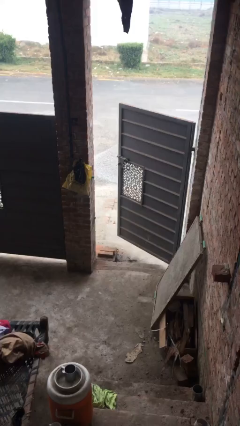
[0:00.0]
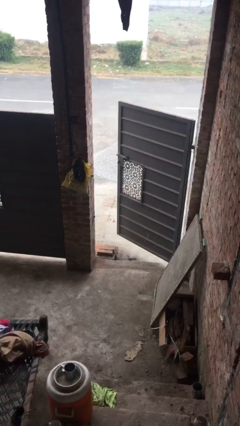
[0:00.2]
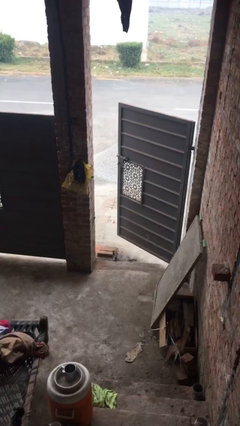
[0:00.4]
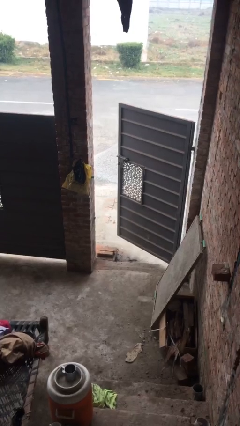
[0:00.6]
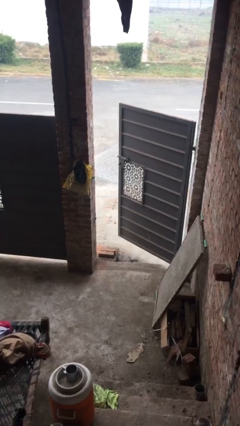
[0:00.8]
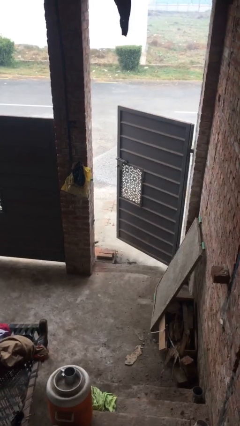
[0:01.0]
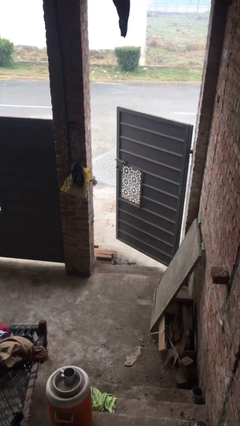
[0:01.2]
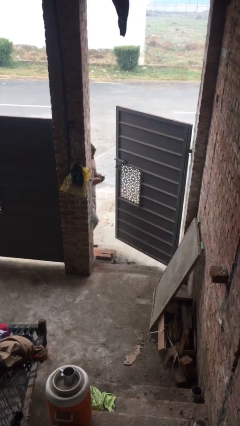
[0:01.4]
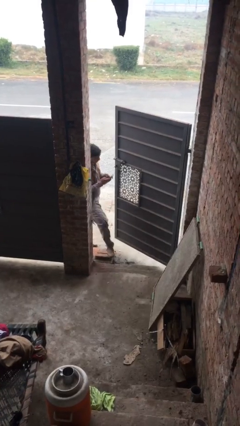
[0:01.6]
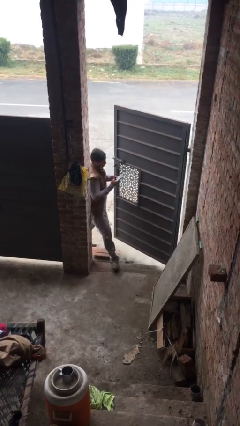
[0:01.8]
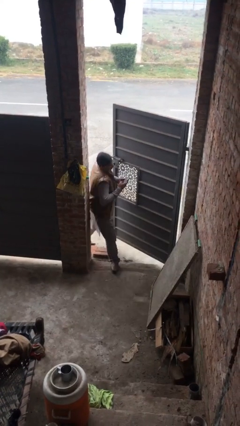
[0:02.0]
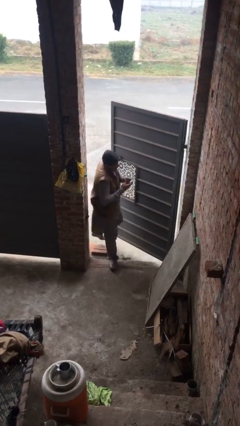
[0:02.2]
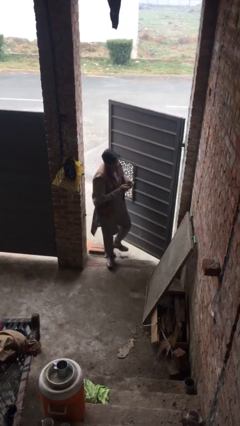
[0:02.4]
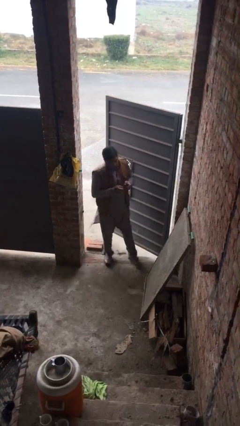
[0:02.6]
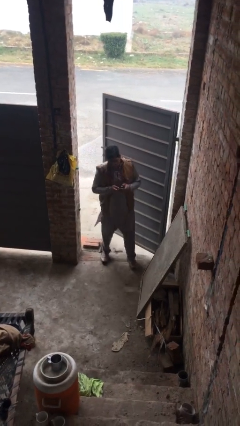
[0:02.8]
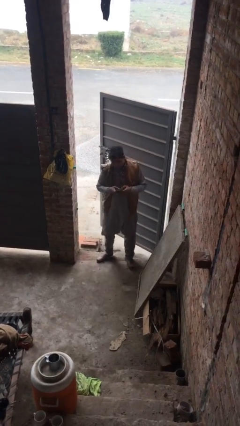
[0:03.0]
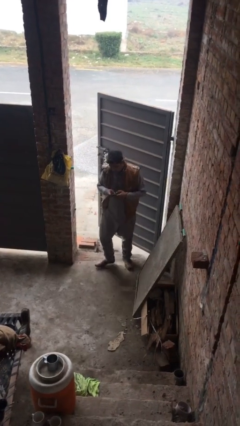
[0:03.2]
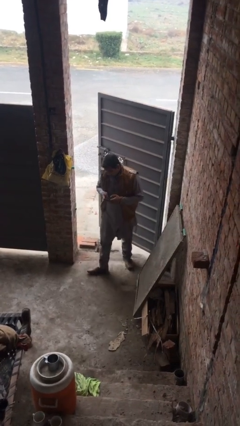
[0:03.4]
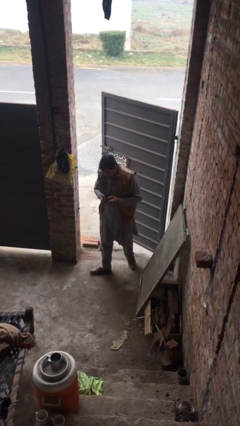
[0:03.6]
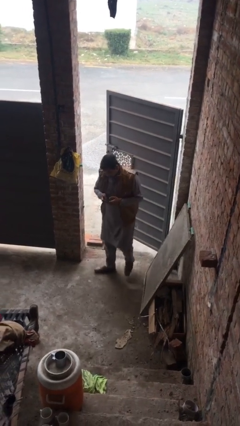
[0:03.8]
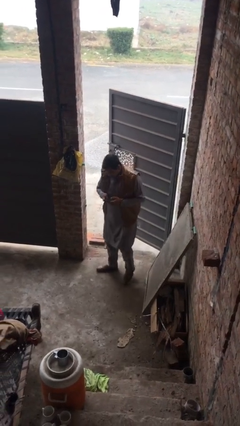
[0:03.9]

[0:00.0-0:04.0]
person enters scene through structure

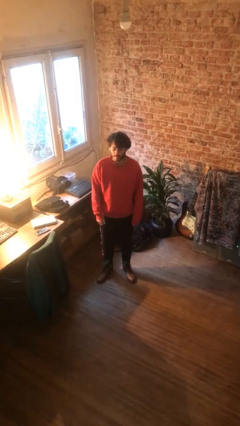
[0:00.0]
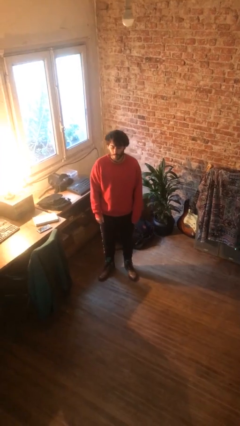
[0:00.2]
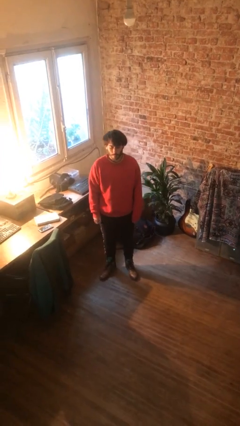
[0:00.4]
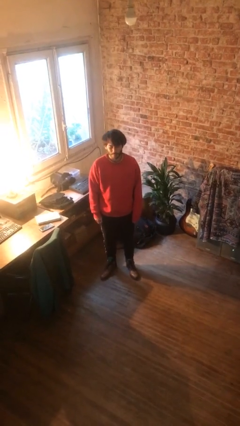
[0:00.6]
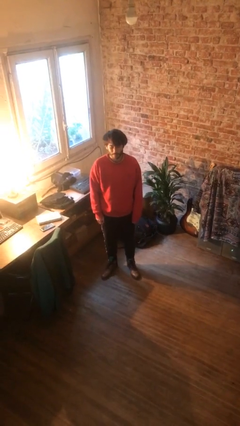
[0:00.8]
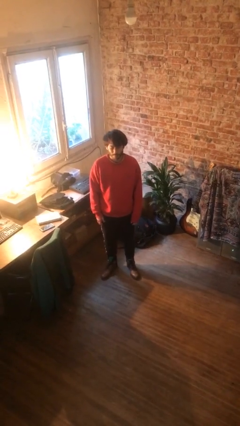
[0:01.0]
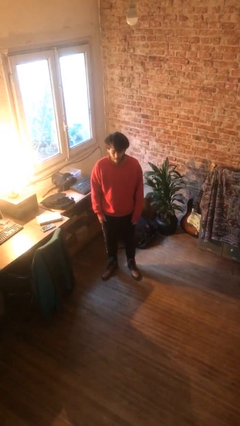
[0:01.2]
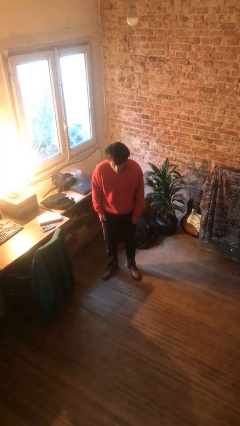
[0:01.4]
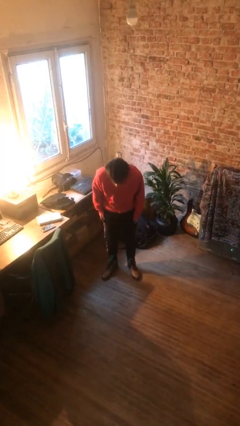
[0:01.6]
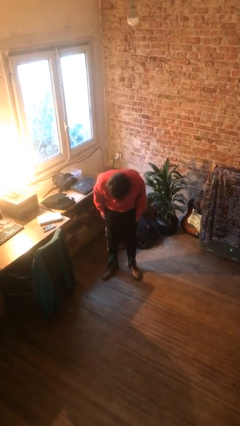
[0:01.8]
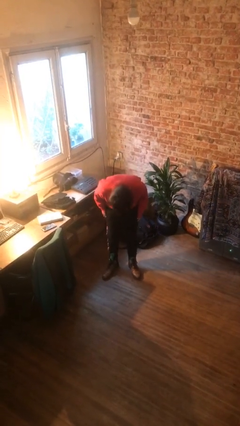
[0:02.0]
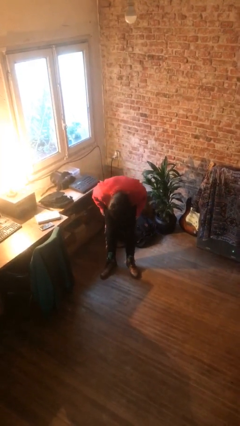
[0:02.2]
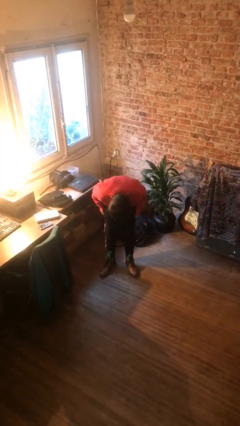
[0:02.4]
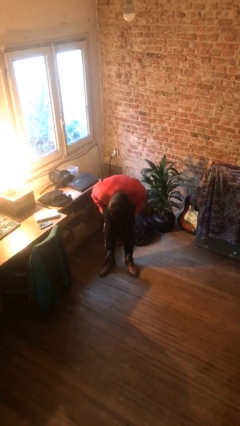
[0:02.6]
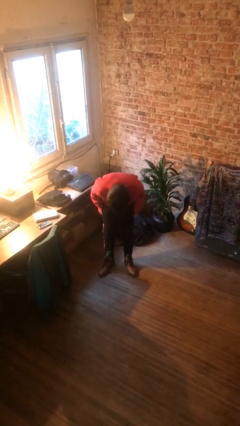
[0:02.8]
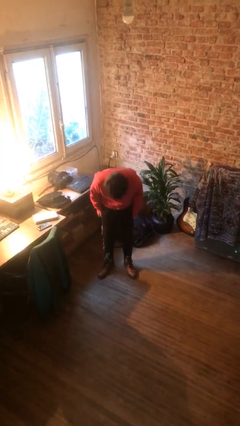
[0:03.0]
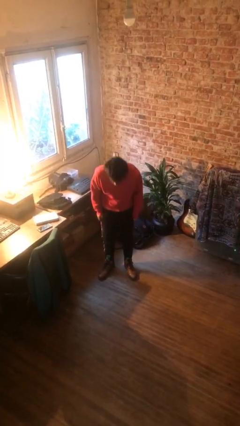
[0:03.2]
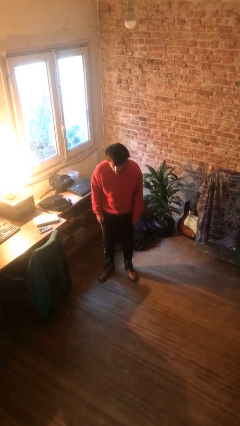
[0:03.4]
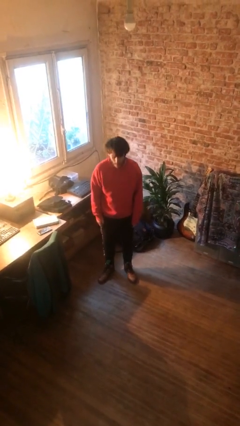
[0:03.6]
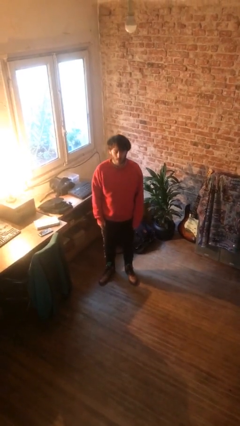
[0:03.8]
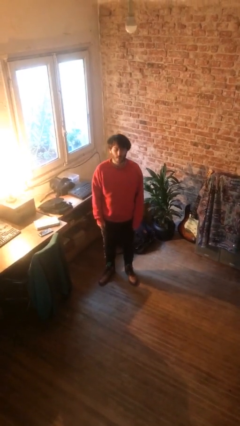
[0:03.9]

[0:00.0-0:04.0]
person bows

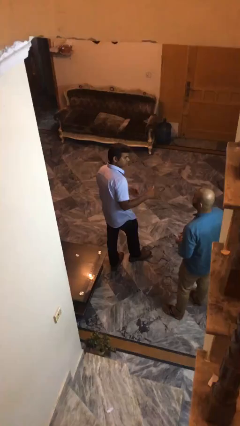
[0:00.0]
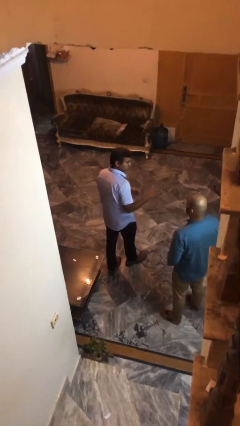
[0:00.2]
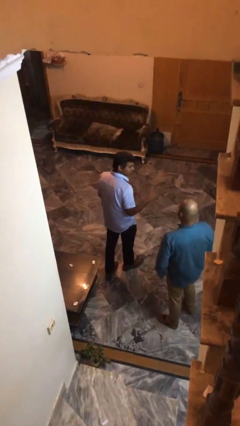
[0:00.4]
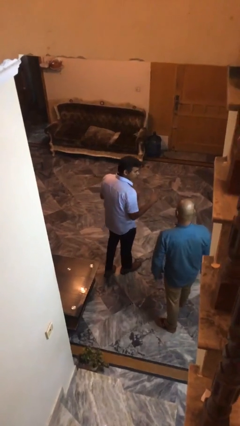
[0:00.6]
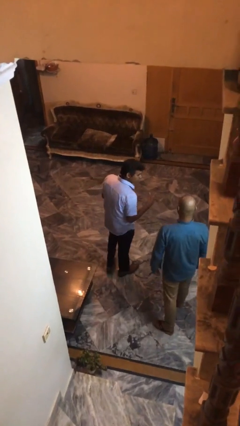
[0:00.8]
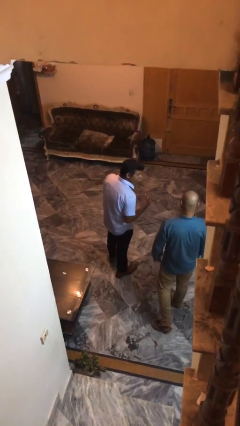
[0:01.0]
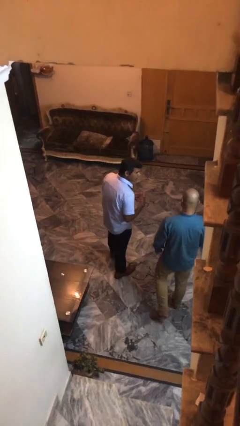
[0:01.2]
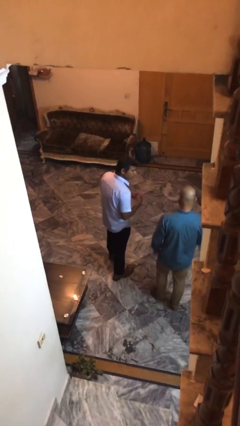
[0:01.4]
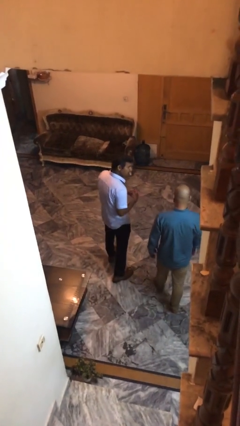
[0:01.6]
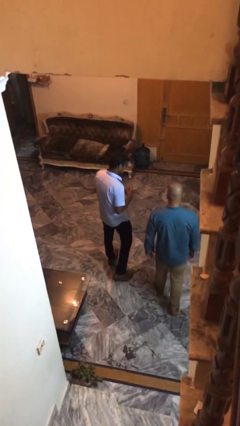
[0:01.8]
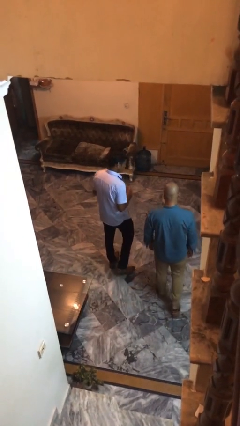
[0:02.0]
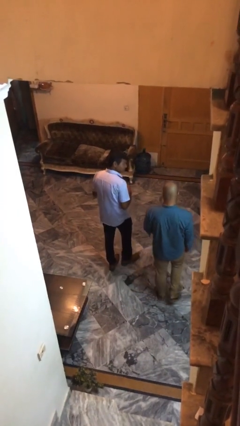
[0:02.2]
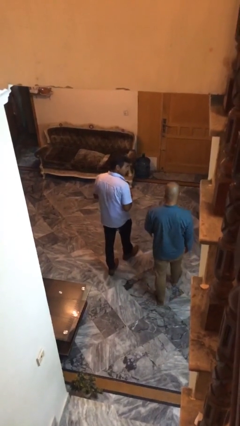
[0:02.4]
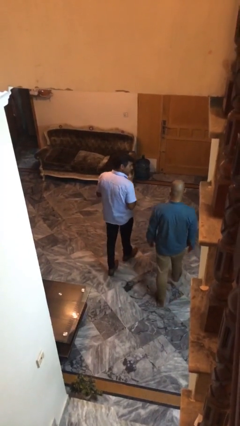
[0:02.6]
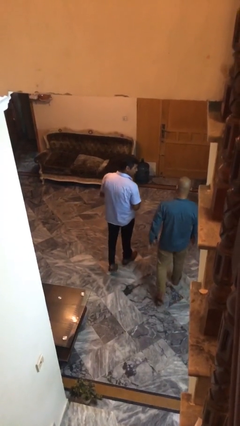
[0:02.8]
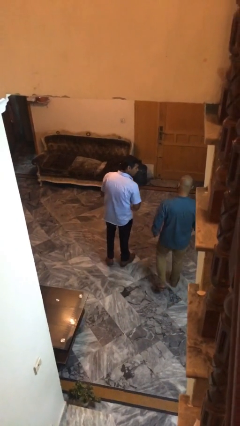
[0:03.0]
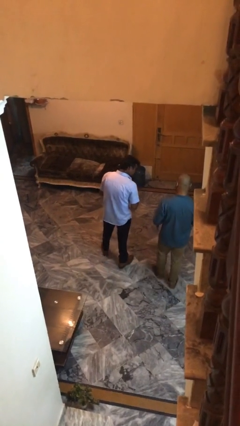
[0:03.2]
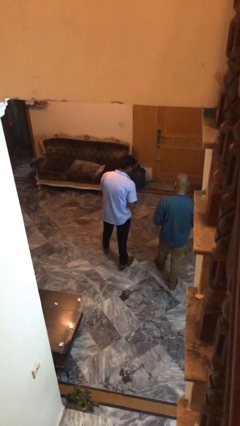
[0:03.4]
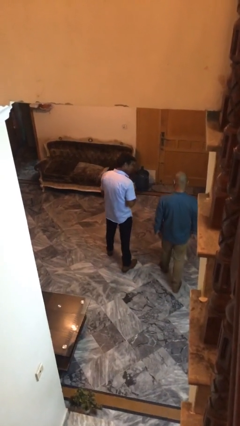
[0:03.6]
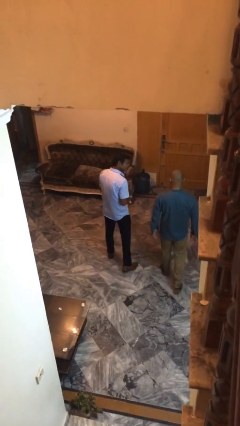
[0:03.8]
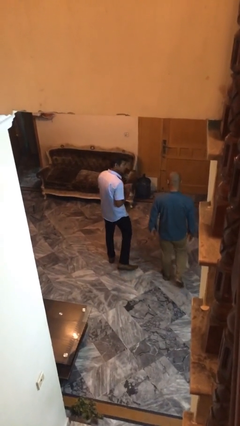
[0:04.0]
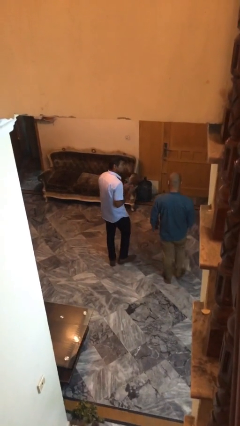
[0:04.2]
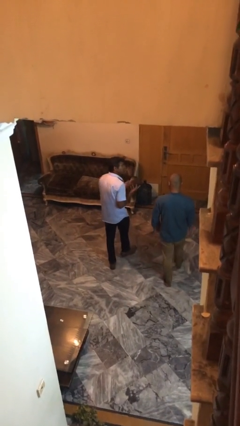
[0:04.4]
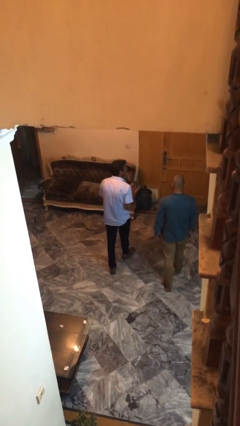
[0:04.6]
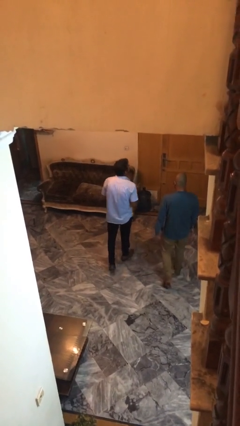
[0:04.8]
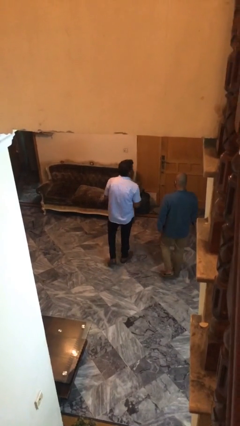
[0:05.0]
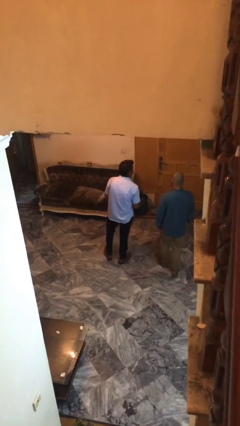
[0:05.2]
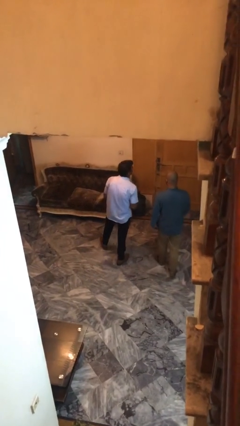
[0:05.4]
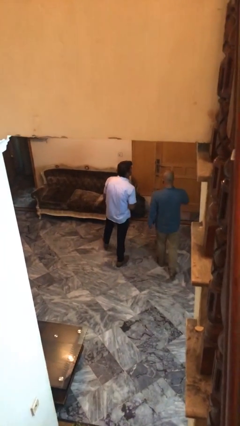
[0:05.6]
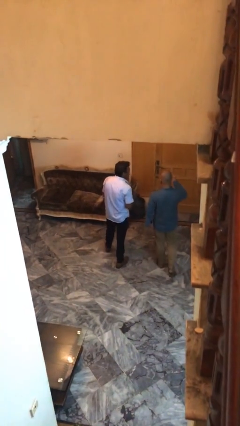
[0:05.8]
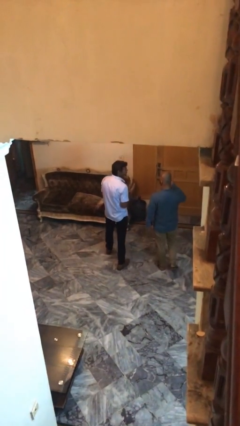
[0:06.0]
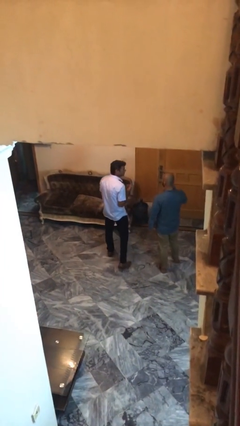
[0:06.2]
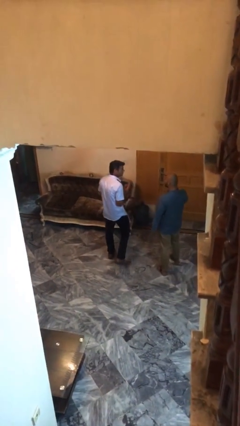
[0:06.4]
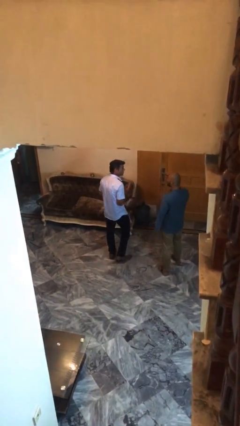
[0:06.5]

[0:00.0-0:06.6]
person talks to person

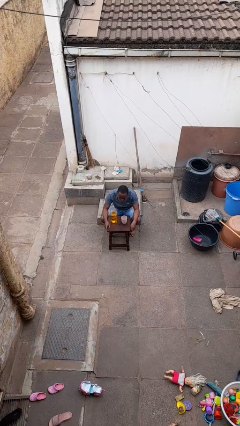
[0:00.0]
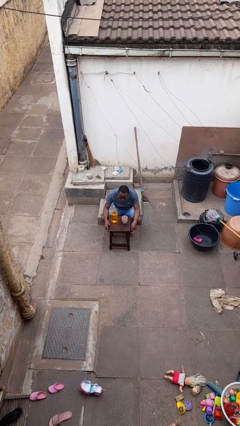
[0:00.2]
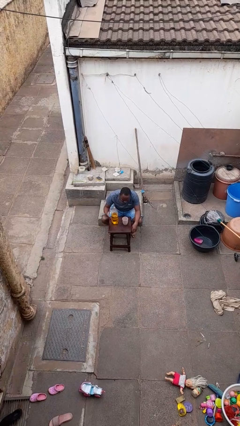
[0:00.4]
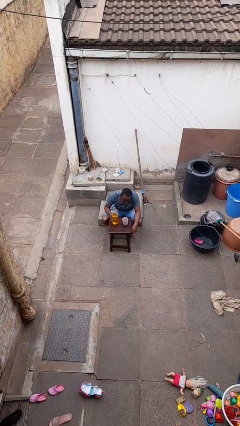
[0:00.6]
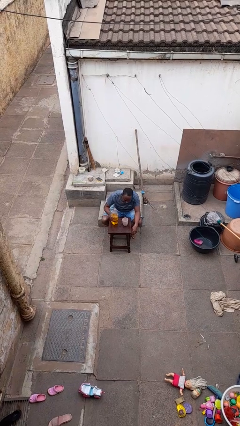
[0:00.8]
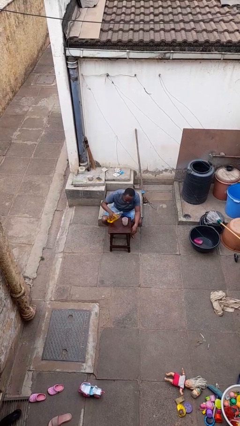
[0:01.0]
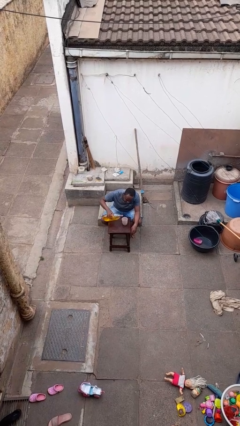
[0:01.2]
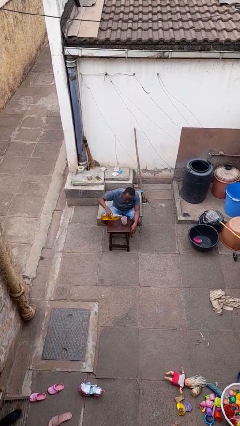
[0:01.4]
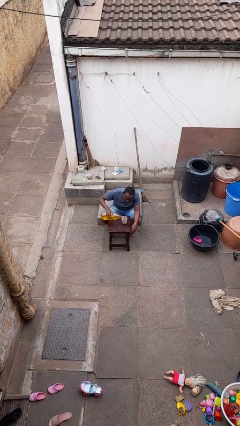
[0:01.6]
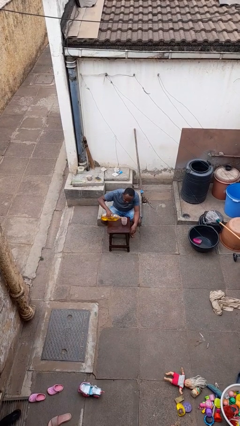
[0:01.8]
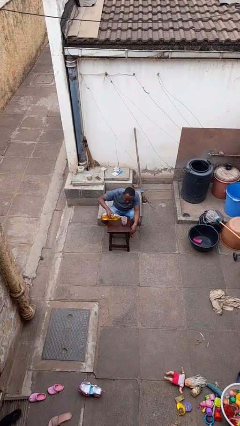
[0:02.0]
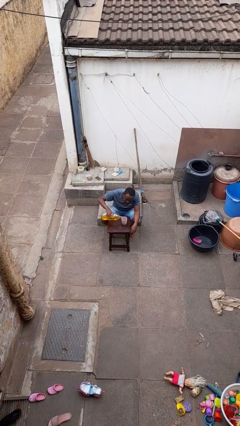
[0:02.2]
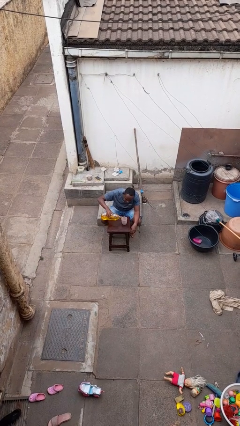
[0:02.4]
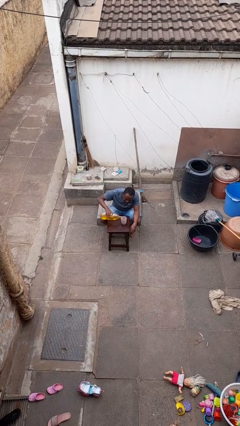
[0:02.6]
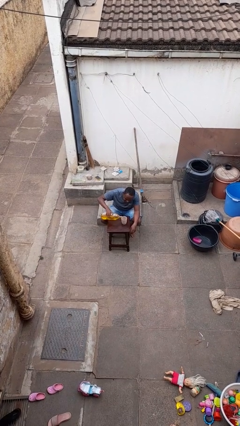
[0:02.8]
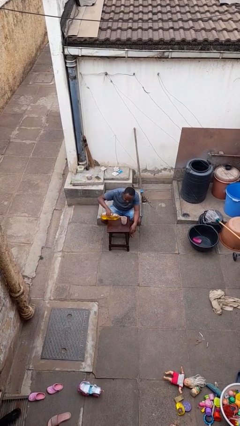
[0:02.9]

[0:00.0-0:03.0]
person pours liquid into cup
